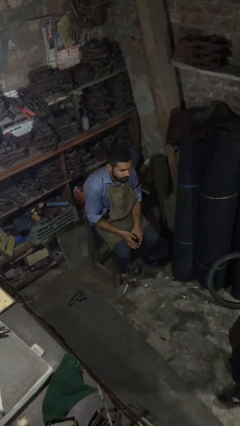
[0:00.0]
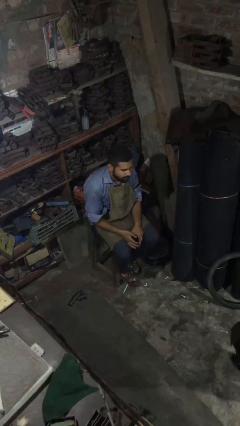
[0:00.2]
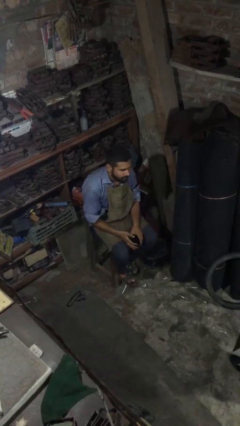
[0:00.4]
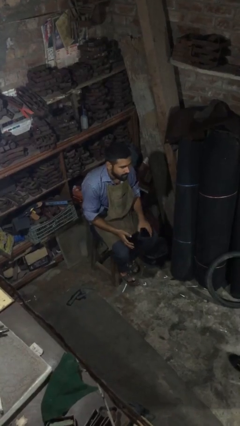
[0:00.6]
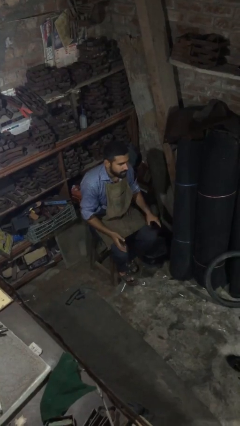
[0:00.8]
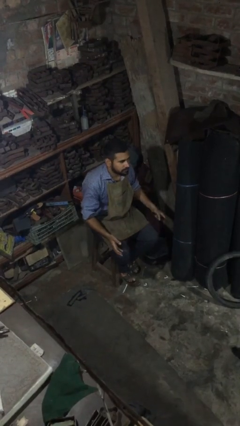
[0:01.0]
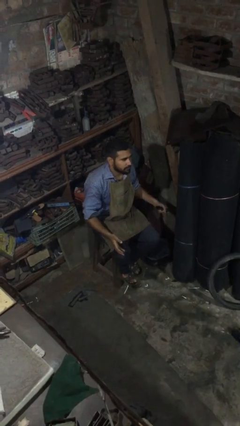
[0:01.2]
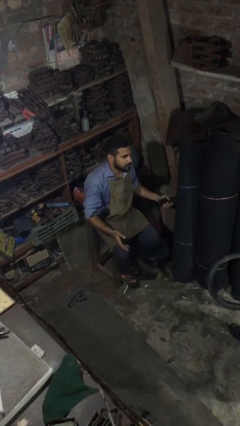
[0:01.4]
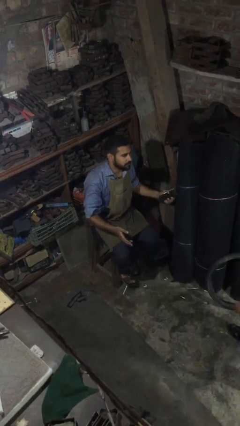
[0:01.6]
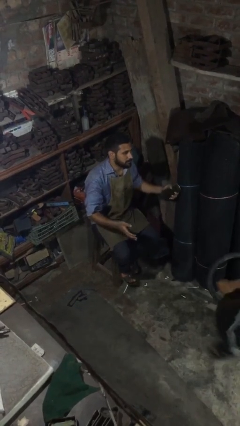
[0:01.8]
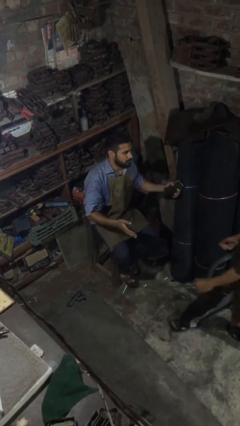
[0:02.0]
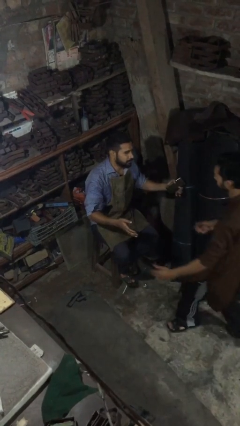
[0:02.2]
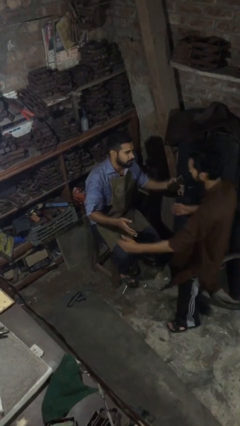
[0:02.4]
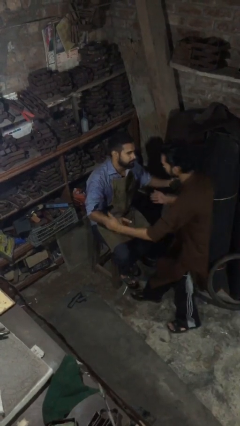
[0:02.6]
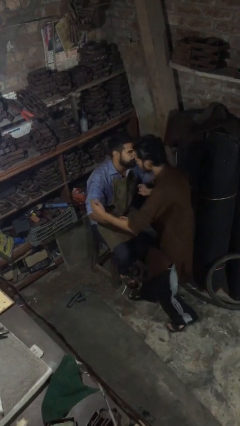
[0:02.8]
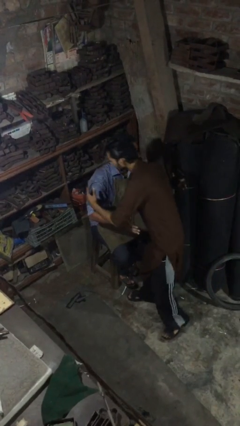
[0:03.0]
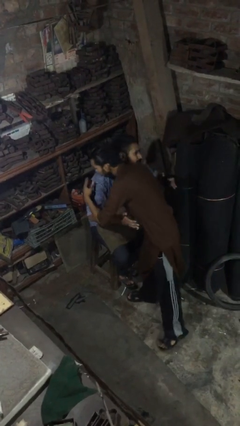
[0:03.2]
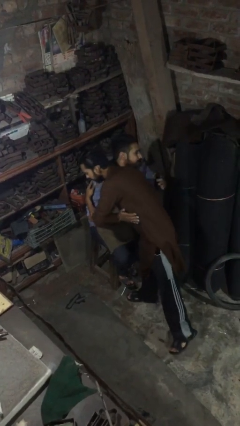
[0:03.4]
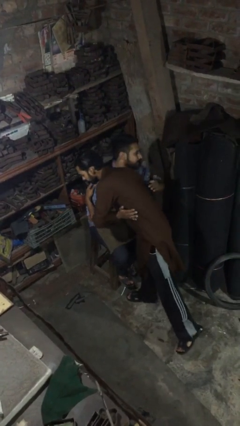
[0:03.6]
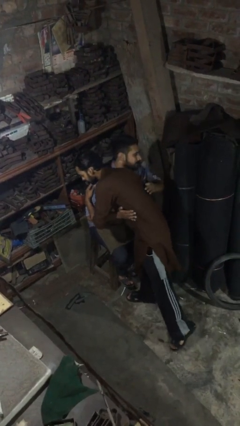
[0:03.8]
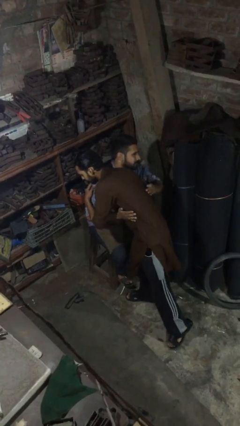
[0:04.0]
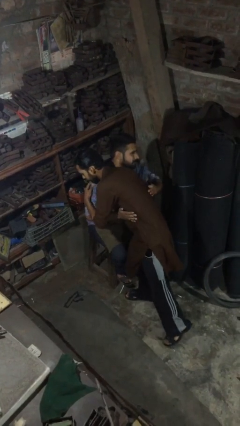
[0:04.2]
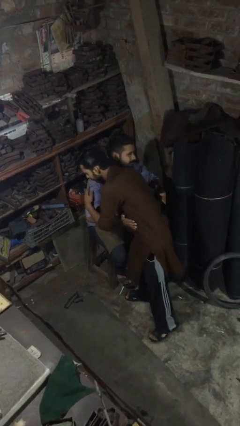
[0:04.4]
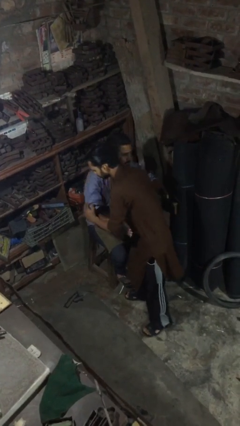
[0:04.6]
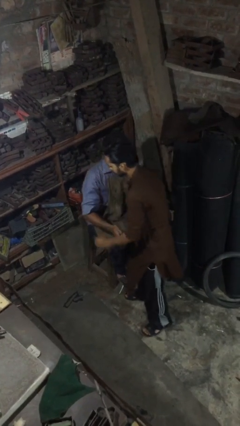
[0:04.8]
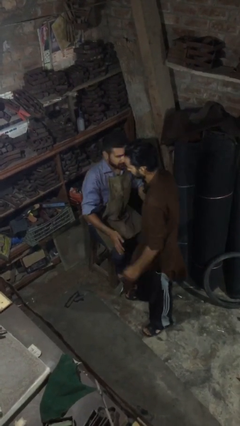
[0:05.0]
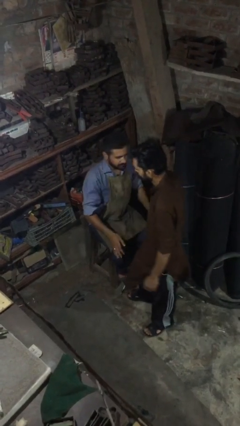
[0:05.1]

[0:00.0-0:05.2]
person embraces person

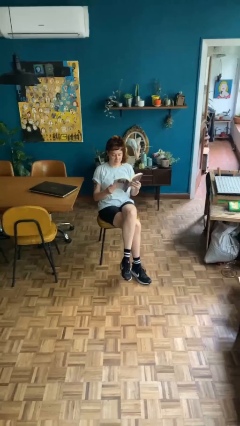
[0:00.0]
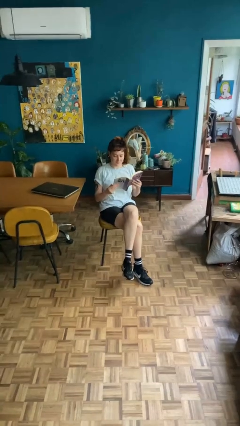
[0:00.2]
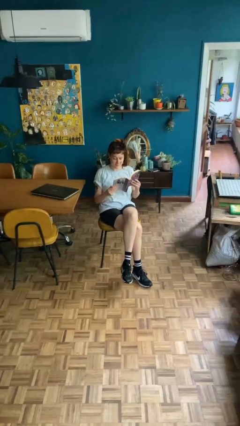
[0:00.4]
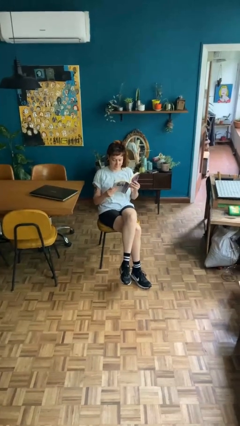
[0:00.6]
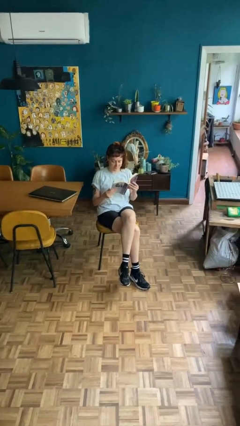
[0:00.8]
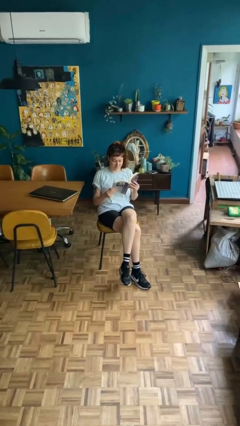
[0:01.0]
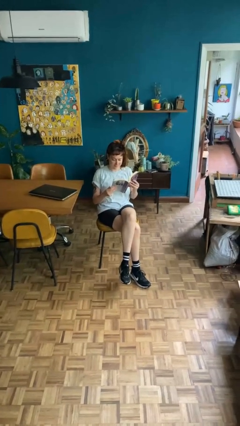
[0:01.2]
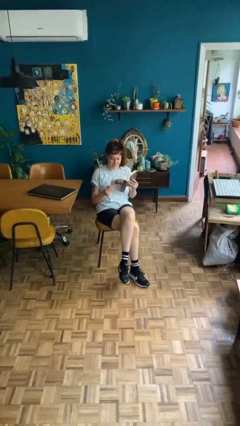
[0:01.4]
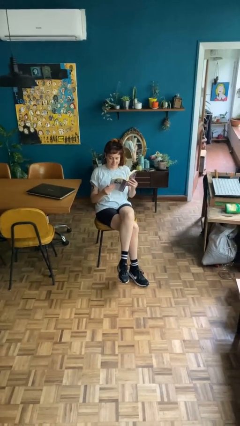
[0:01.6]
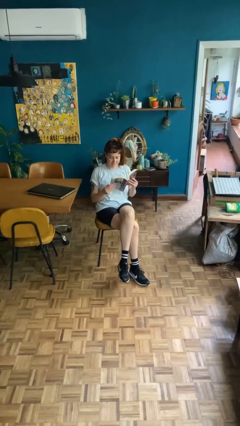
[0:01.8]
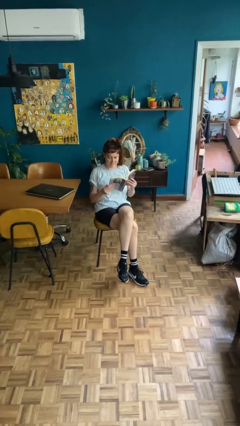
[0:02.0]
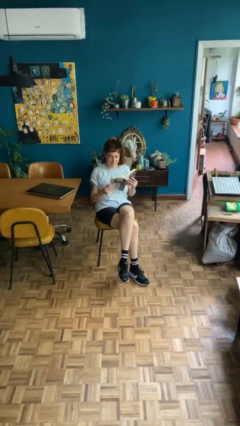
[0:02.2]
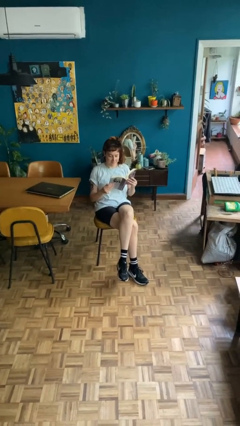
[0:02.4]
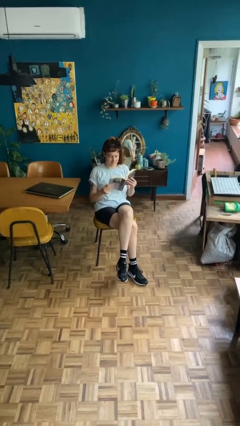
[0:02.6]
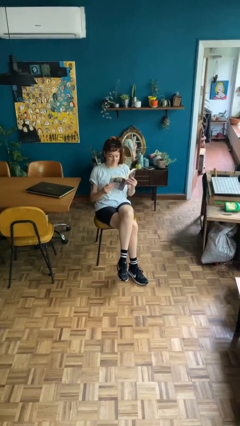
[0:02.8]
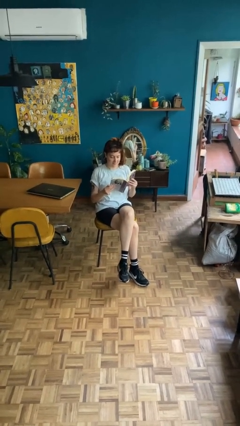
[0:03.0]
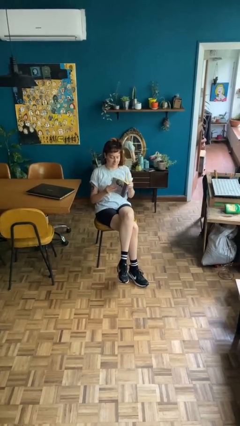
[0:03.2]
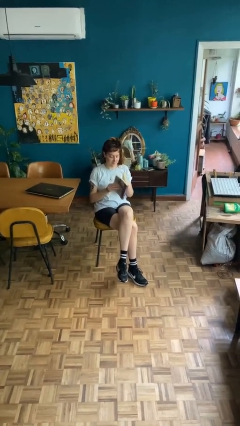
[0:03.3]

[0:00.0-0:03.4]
person reads document

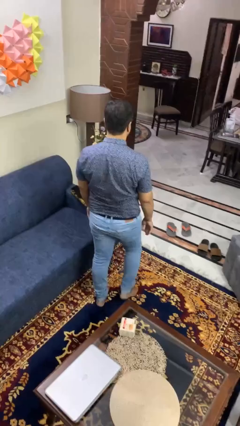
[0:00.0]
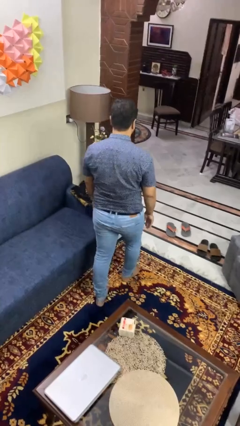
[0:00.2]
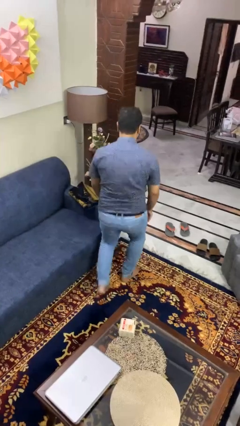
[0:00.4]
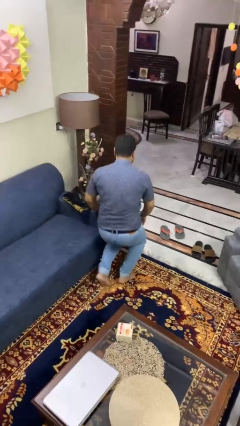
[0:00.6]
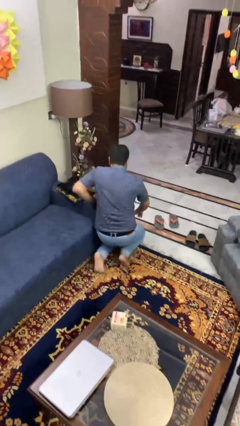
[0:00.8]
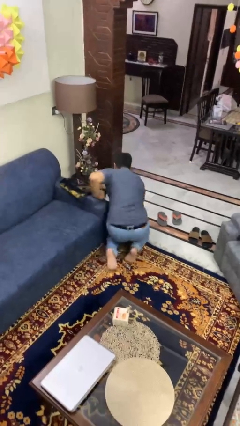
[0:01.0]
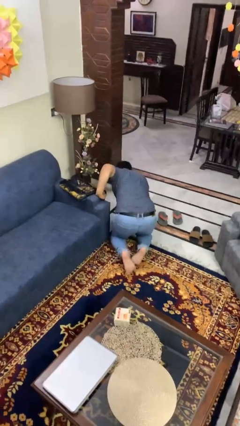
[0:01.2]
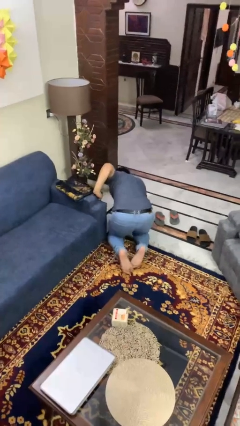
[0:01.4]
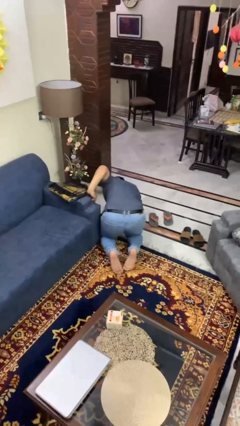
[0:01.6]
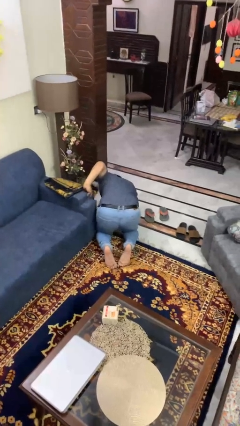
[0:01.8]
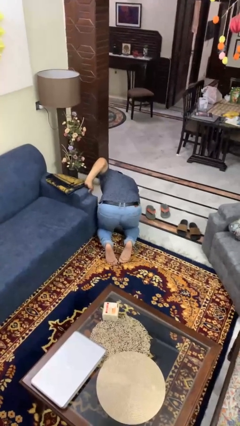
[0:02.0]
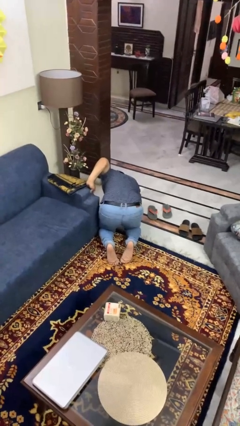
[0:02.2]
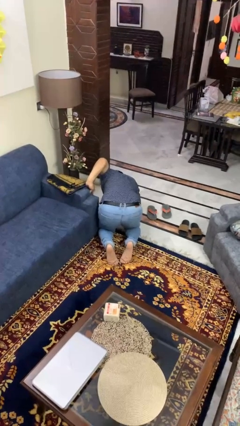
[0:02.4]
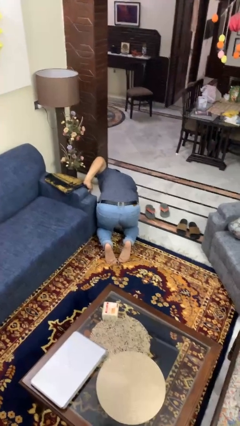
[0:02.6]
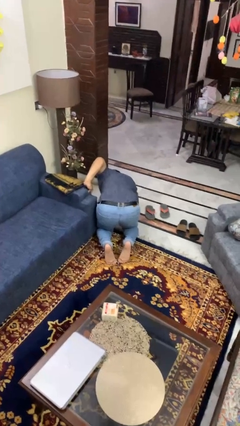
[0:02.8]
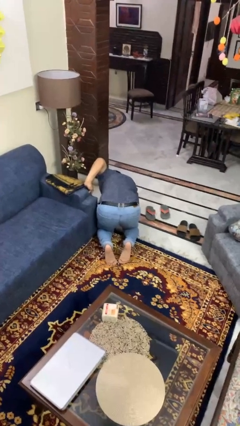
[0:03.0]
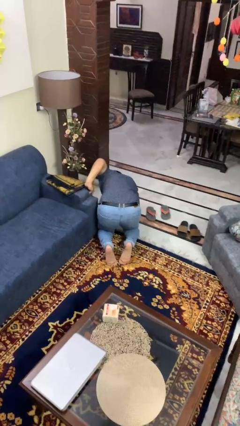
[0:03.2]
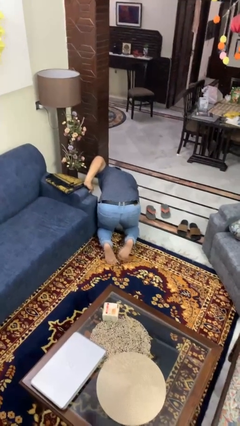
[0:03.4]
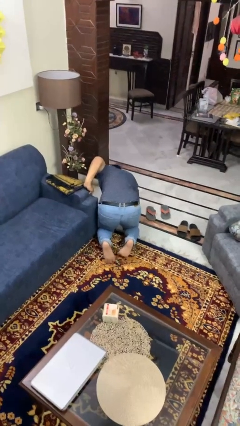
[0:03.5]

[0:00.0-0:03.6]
person trips on object on floor

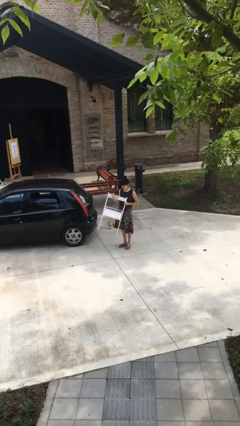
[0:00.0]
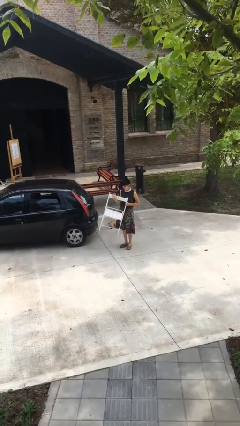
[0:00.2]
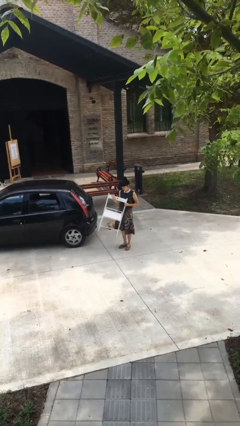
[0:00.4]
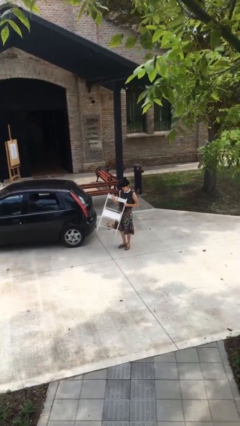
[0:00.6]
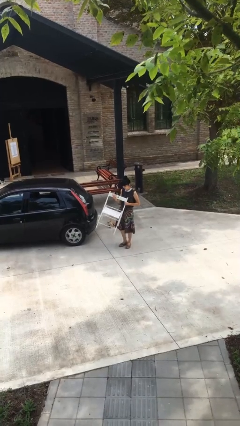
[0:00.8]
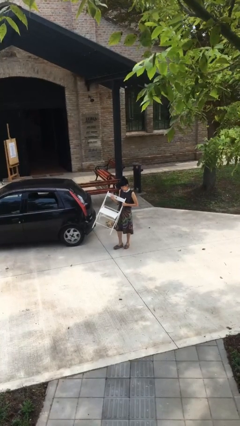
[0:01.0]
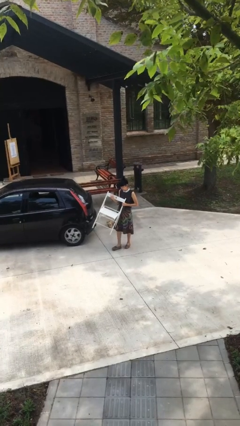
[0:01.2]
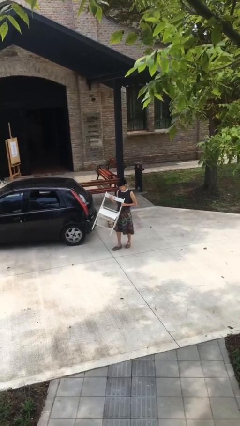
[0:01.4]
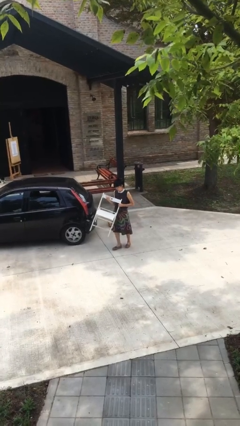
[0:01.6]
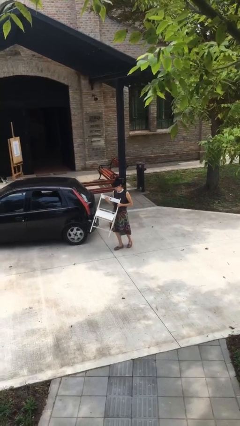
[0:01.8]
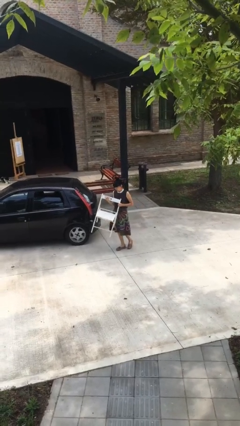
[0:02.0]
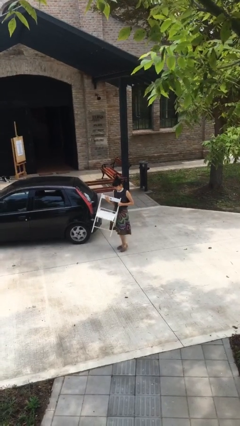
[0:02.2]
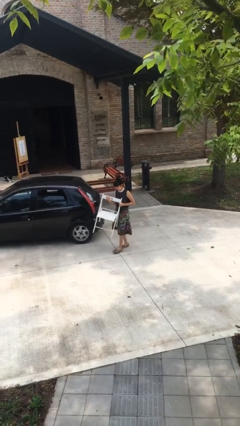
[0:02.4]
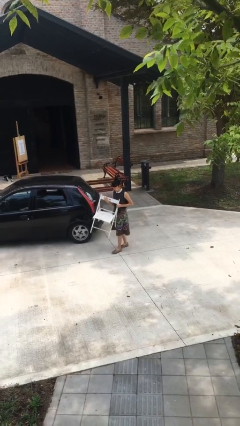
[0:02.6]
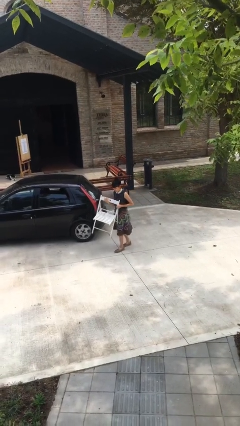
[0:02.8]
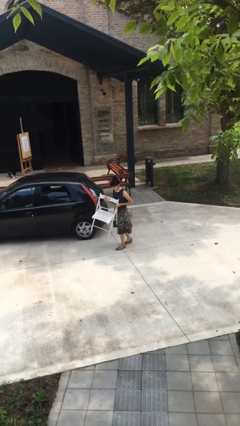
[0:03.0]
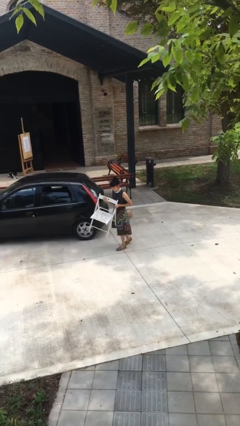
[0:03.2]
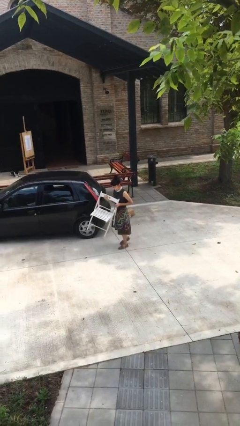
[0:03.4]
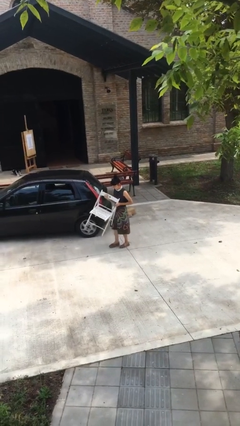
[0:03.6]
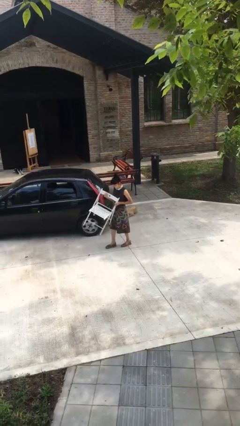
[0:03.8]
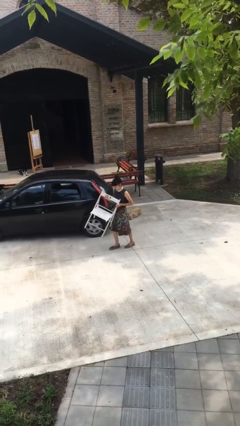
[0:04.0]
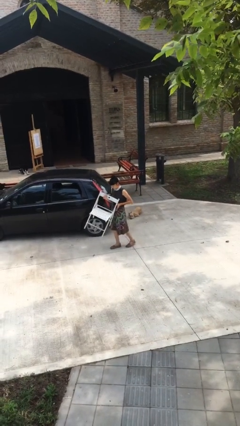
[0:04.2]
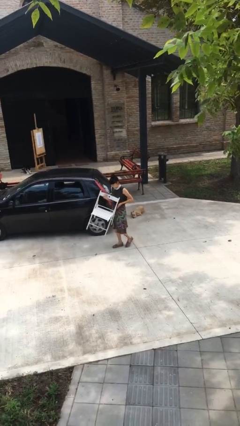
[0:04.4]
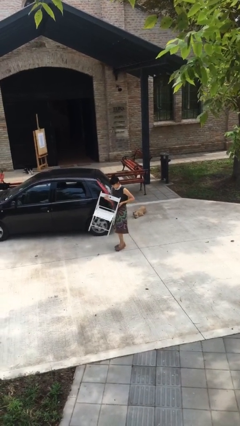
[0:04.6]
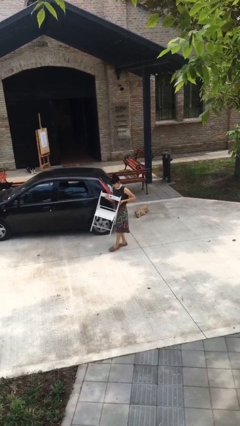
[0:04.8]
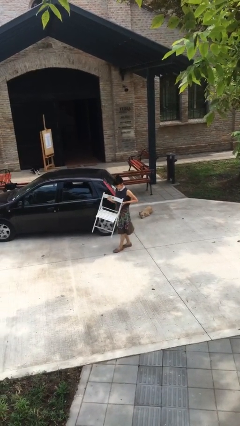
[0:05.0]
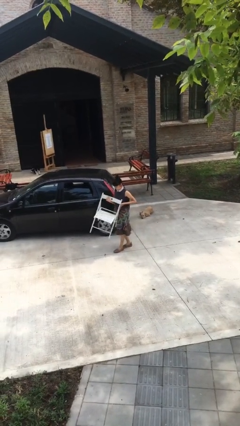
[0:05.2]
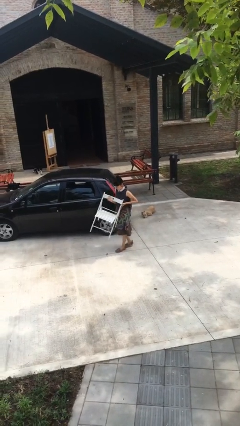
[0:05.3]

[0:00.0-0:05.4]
person carries heavy object

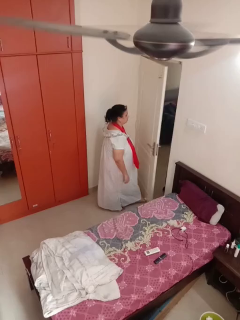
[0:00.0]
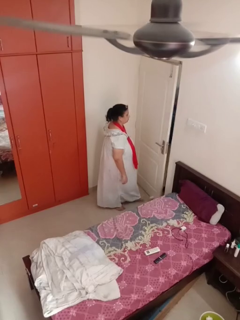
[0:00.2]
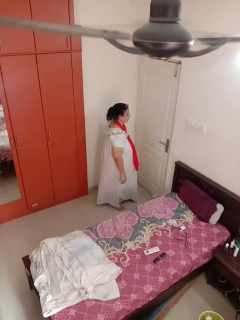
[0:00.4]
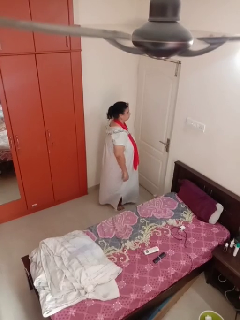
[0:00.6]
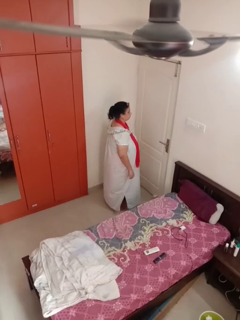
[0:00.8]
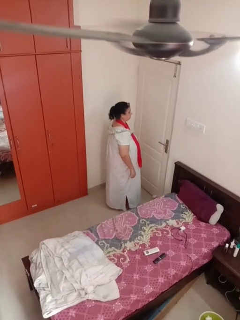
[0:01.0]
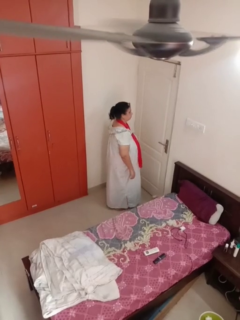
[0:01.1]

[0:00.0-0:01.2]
person closes door with foot
